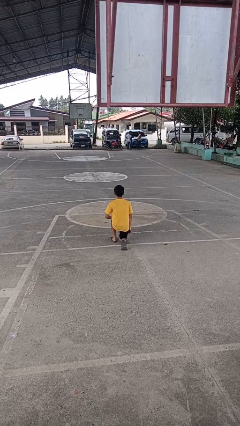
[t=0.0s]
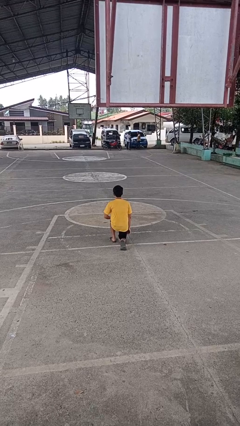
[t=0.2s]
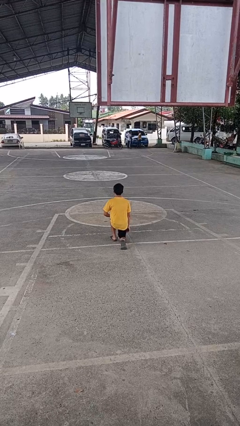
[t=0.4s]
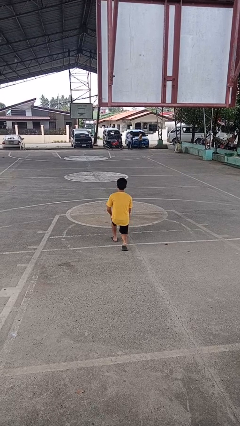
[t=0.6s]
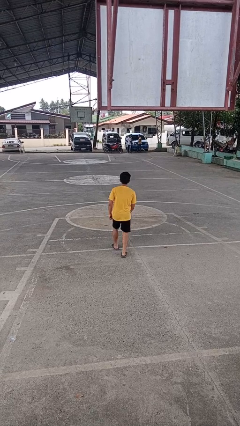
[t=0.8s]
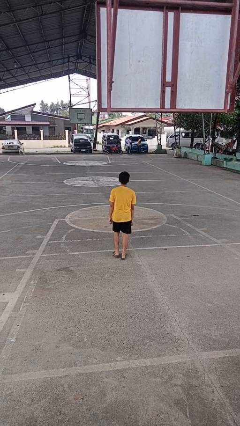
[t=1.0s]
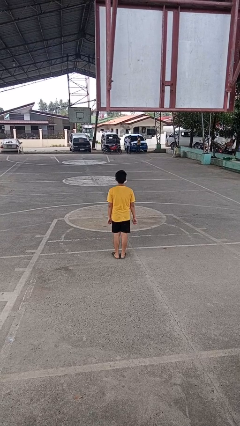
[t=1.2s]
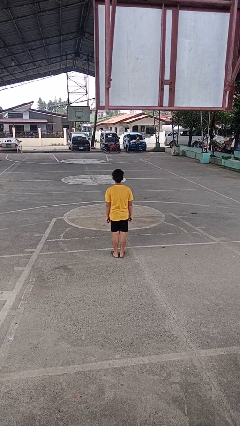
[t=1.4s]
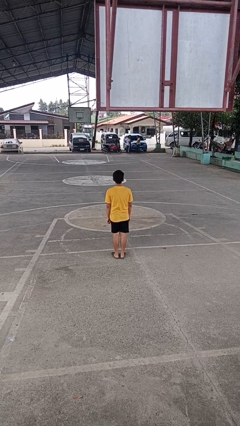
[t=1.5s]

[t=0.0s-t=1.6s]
person stands up from floor

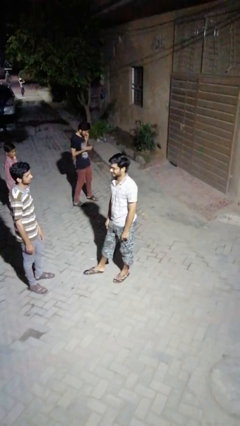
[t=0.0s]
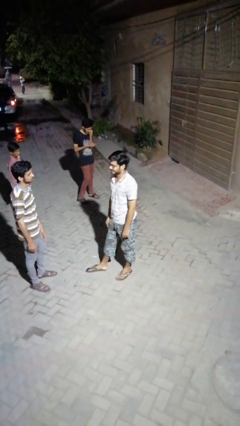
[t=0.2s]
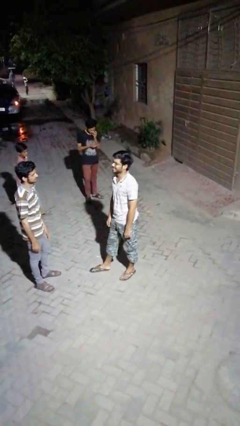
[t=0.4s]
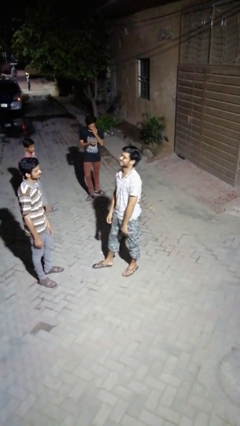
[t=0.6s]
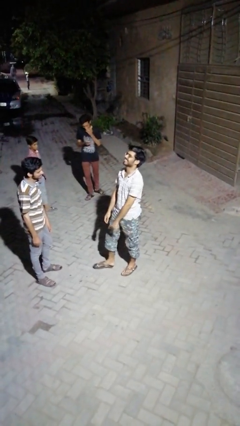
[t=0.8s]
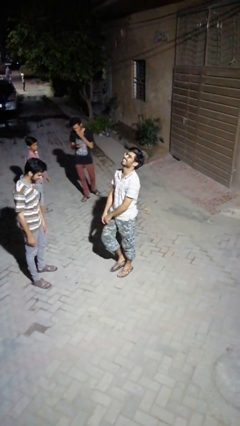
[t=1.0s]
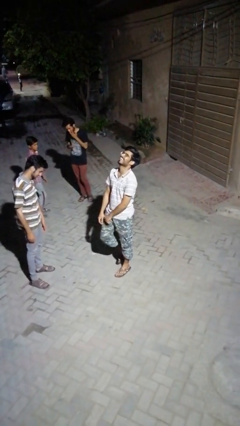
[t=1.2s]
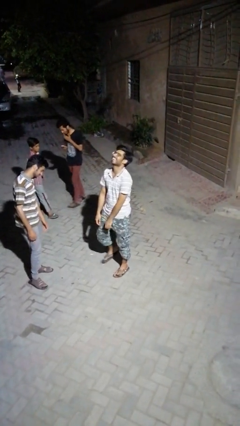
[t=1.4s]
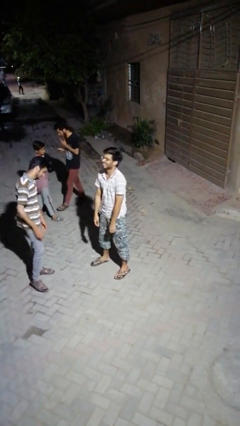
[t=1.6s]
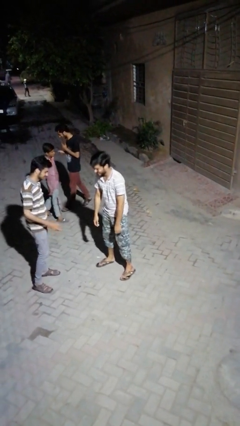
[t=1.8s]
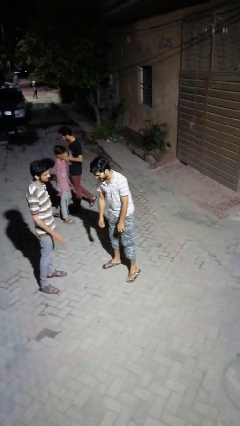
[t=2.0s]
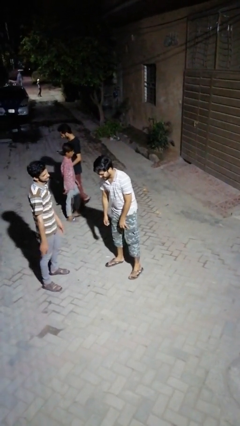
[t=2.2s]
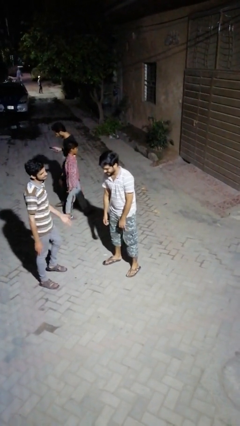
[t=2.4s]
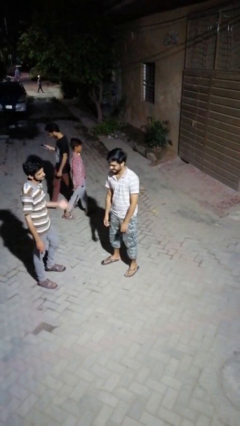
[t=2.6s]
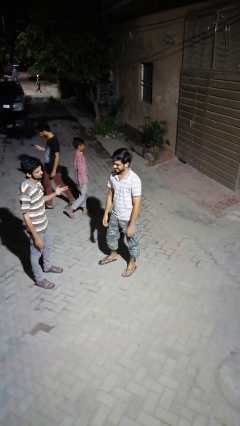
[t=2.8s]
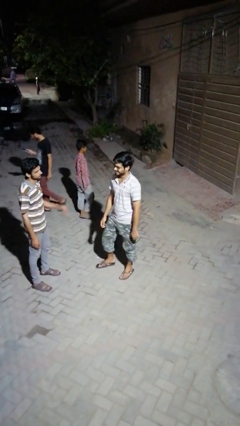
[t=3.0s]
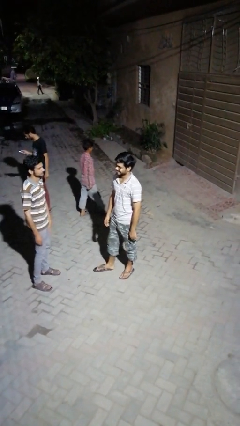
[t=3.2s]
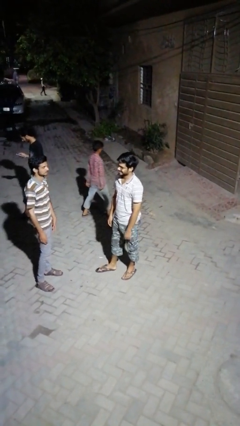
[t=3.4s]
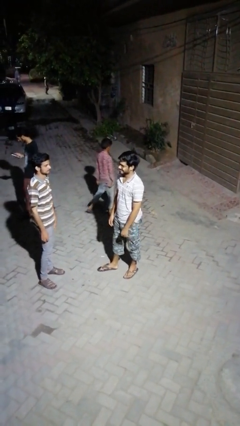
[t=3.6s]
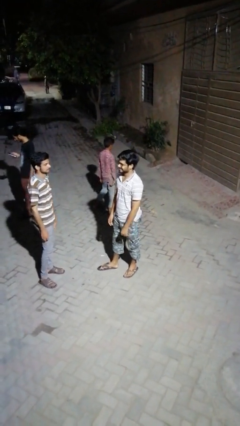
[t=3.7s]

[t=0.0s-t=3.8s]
person laughs with person

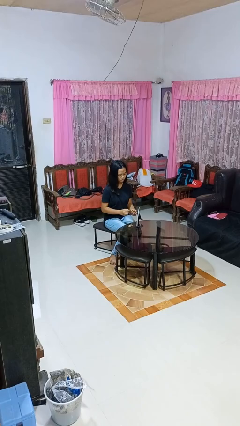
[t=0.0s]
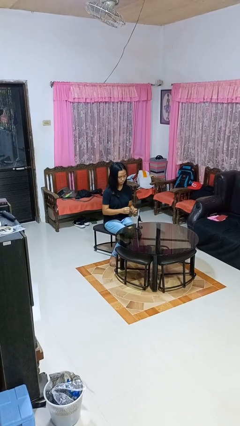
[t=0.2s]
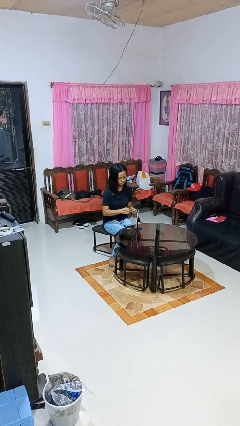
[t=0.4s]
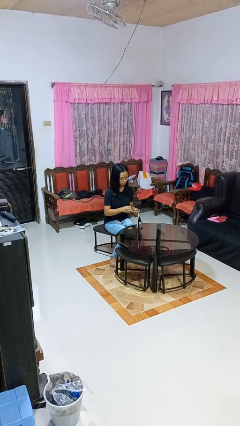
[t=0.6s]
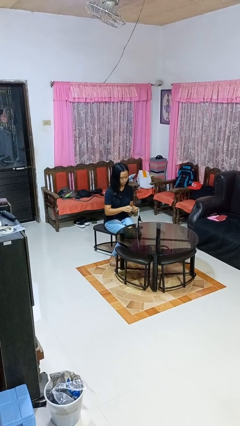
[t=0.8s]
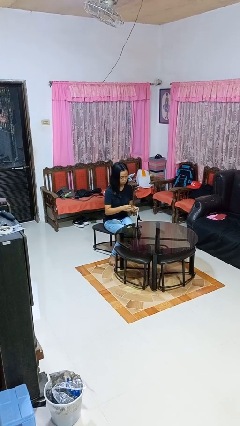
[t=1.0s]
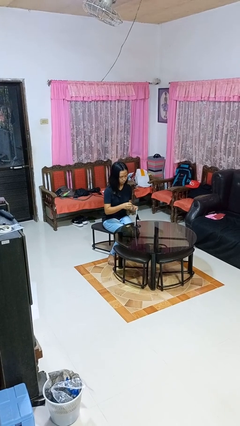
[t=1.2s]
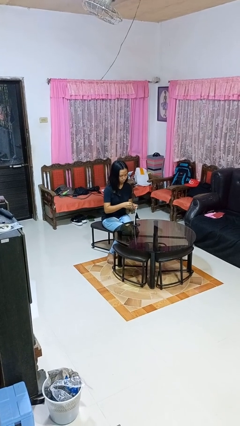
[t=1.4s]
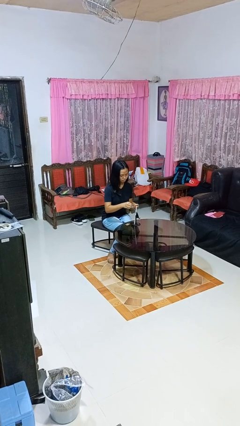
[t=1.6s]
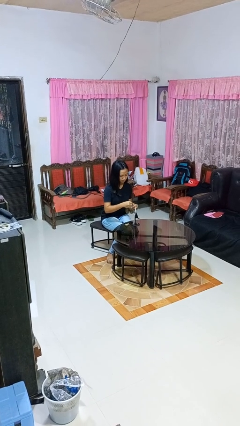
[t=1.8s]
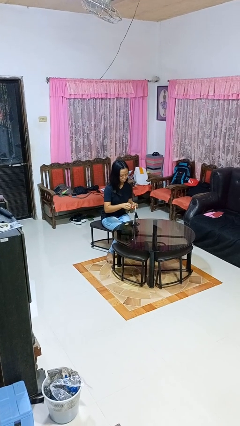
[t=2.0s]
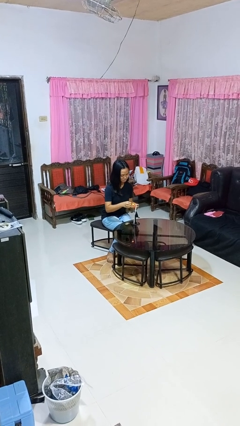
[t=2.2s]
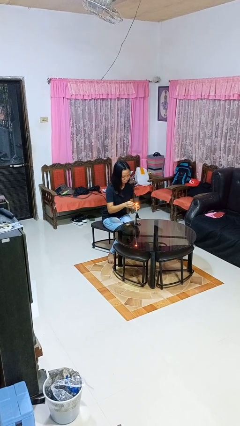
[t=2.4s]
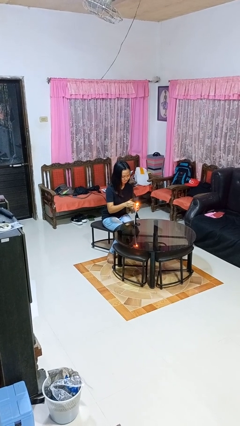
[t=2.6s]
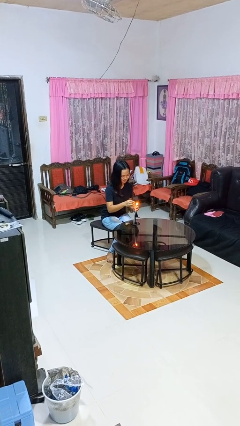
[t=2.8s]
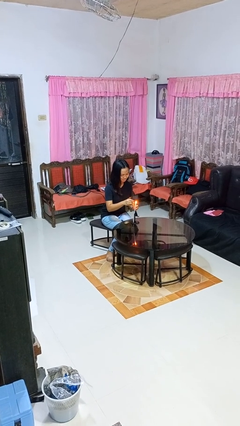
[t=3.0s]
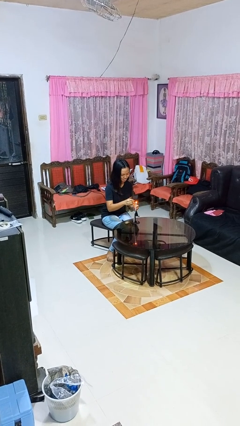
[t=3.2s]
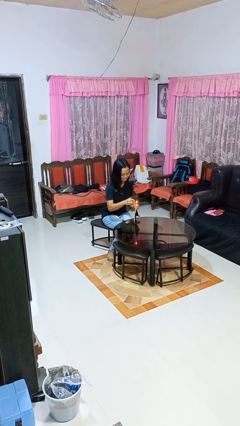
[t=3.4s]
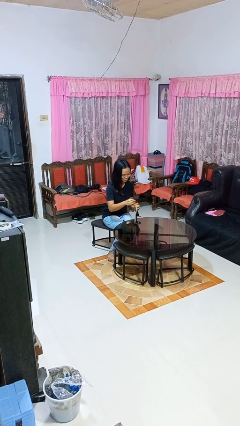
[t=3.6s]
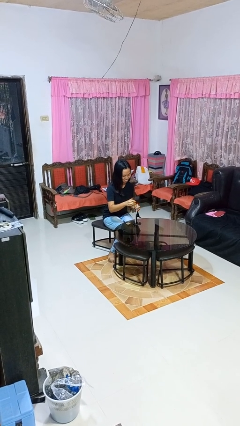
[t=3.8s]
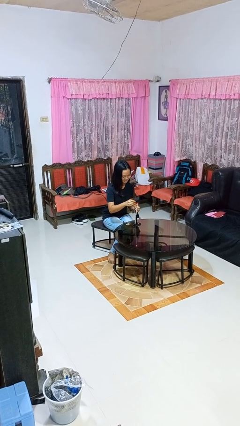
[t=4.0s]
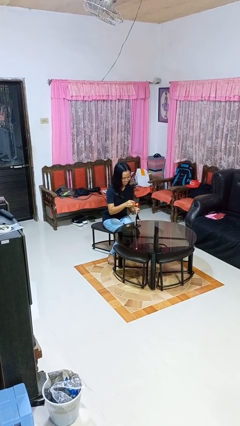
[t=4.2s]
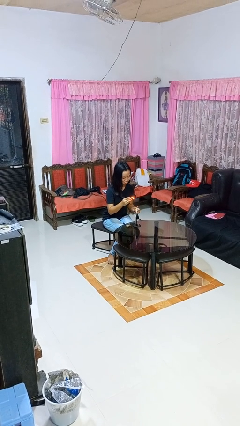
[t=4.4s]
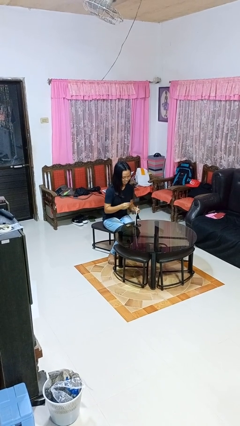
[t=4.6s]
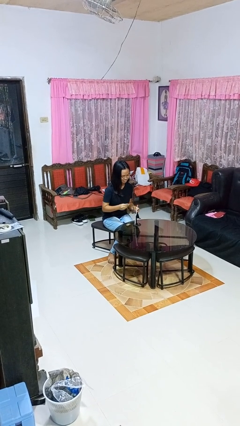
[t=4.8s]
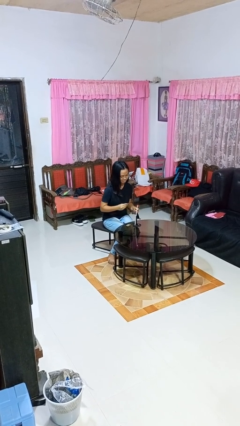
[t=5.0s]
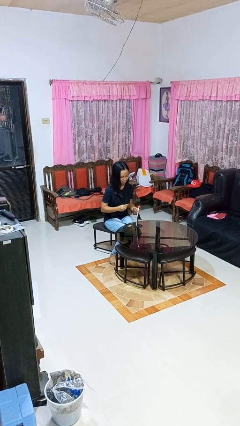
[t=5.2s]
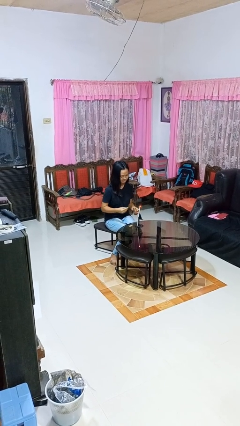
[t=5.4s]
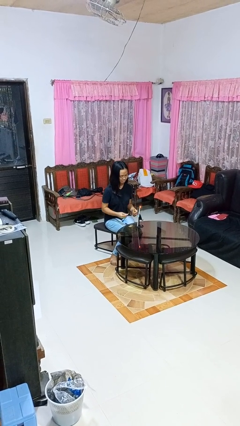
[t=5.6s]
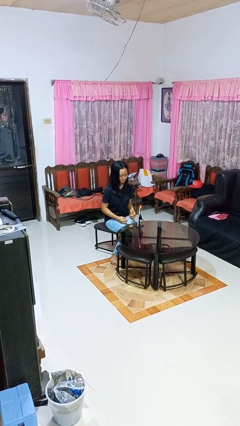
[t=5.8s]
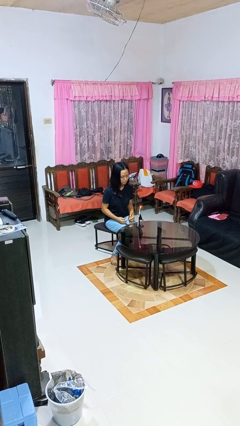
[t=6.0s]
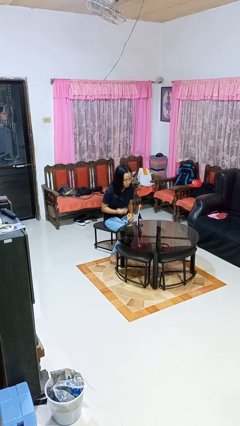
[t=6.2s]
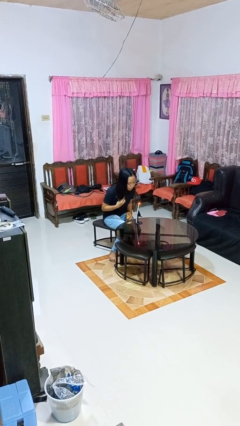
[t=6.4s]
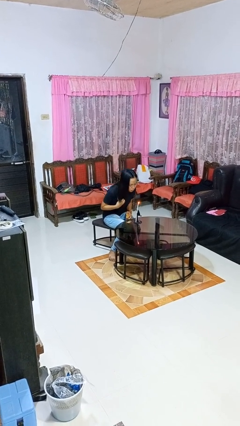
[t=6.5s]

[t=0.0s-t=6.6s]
person lights candle

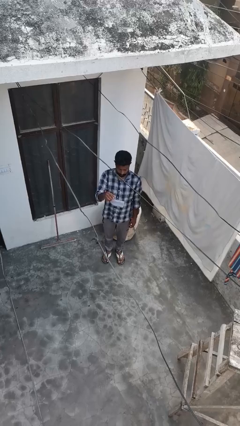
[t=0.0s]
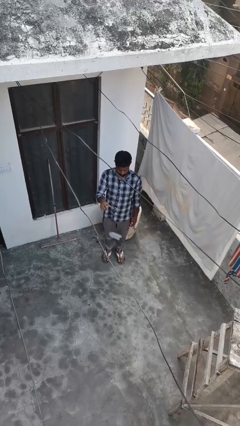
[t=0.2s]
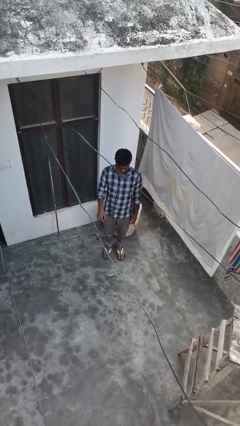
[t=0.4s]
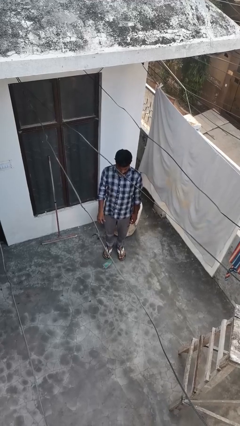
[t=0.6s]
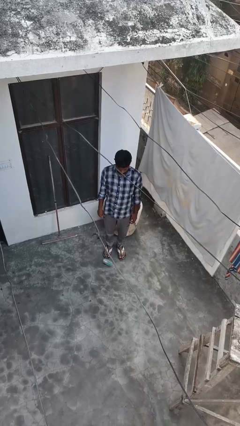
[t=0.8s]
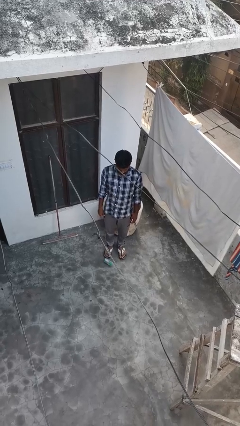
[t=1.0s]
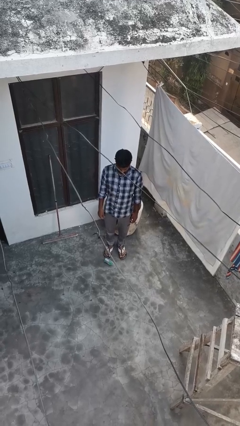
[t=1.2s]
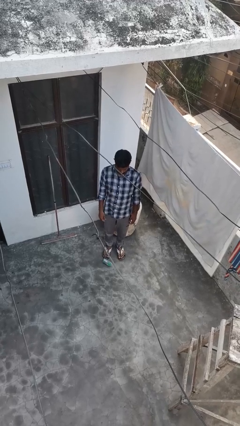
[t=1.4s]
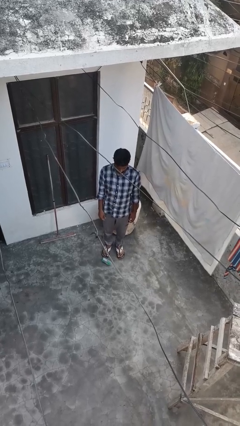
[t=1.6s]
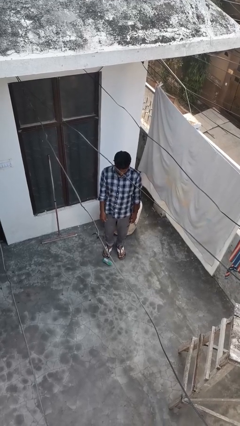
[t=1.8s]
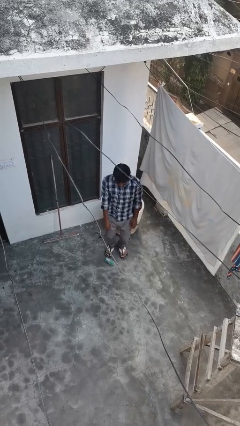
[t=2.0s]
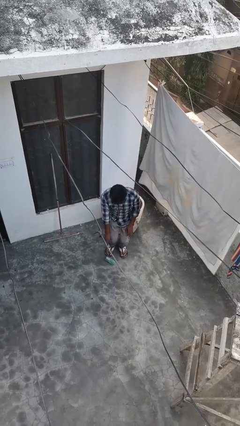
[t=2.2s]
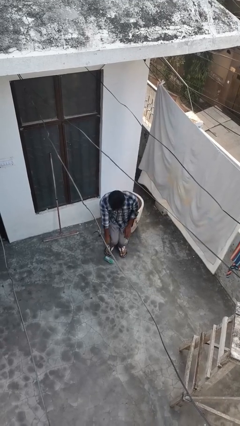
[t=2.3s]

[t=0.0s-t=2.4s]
person throws object into air

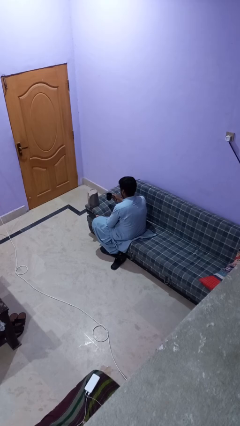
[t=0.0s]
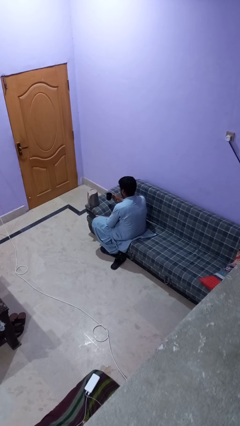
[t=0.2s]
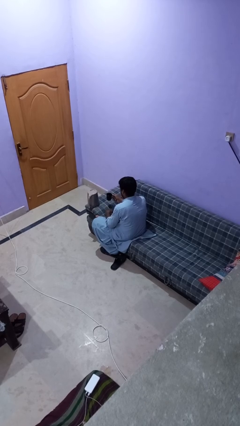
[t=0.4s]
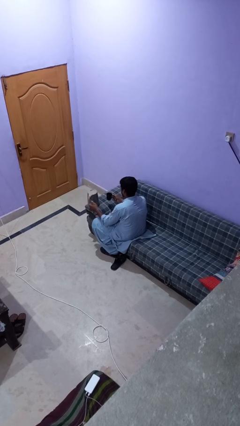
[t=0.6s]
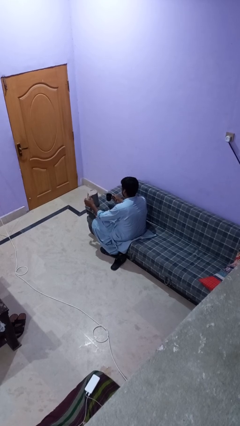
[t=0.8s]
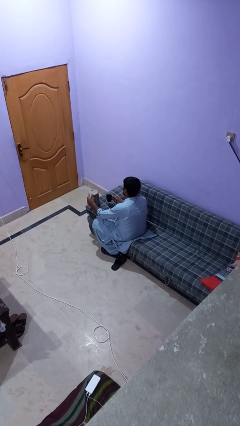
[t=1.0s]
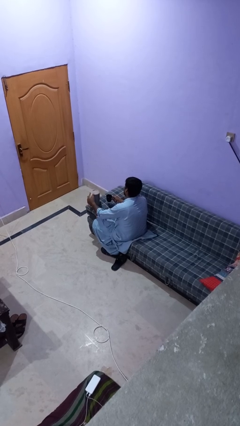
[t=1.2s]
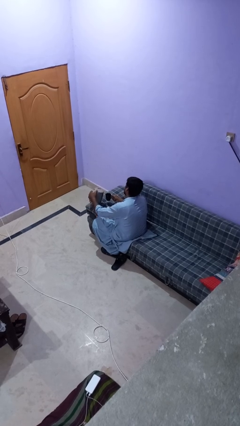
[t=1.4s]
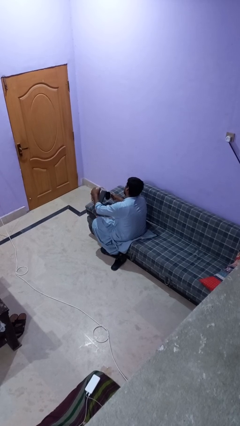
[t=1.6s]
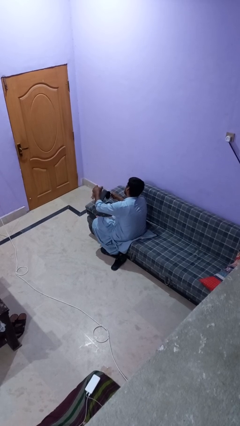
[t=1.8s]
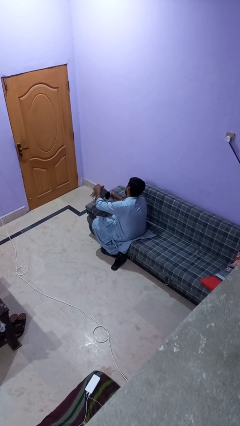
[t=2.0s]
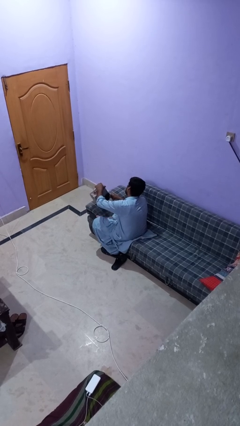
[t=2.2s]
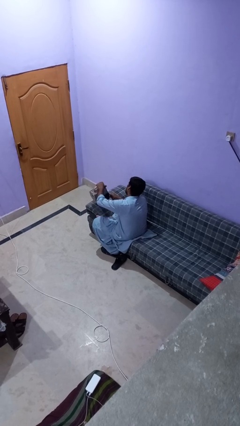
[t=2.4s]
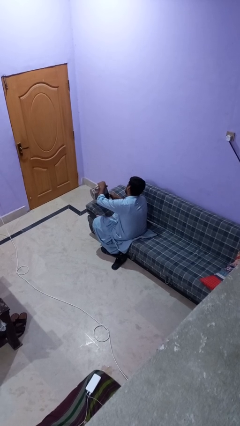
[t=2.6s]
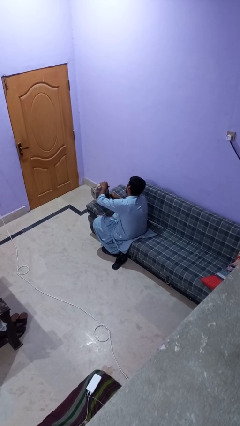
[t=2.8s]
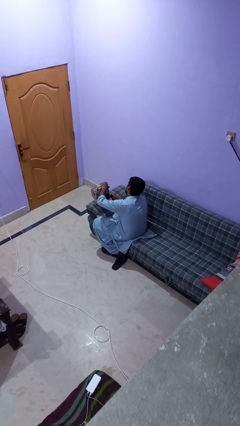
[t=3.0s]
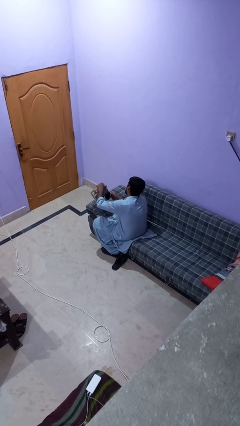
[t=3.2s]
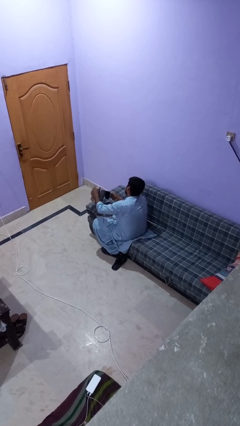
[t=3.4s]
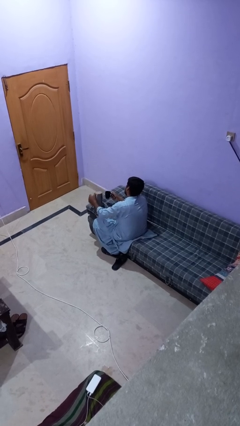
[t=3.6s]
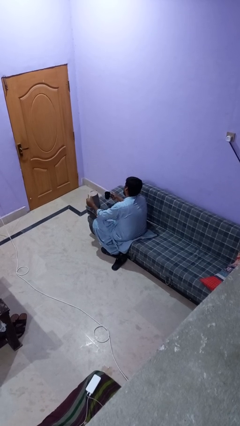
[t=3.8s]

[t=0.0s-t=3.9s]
person pours coffee into mug
